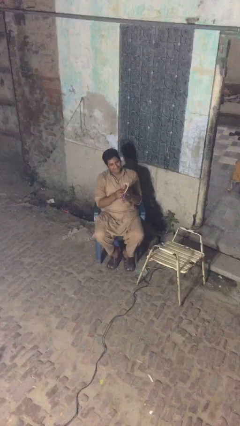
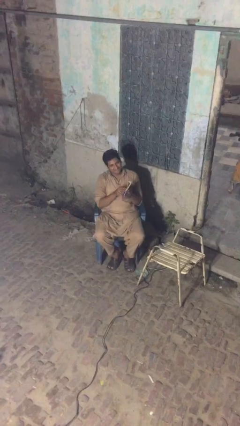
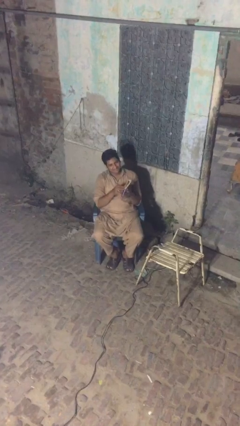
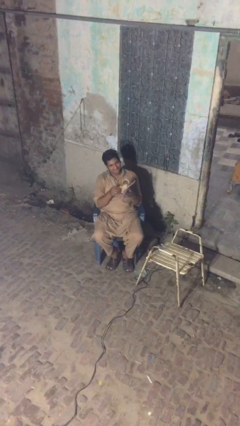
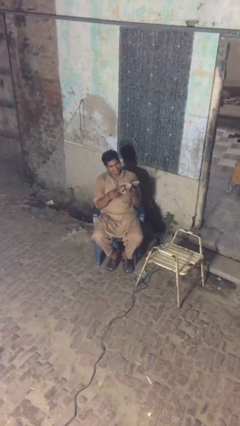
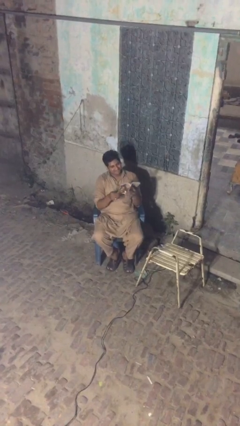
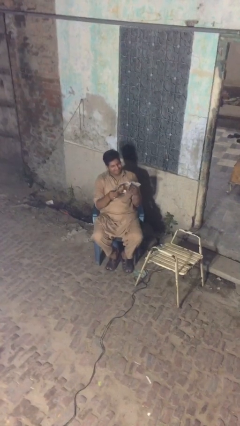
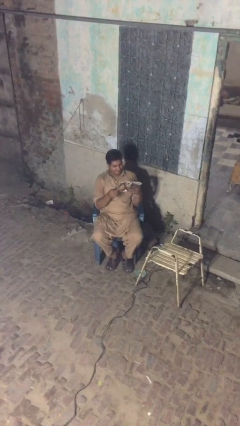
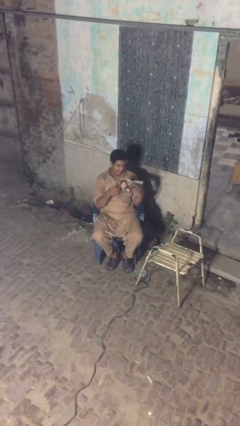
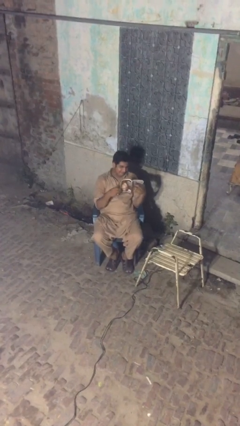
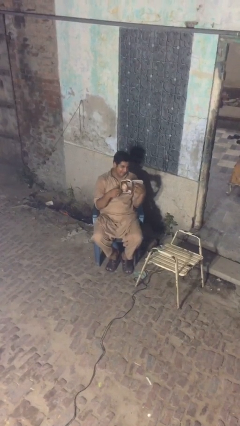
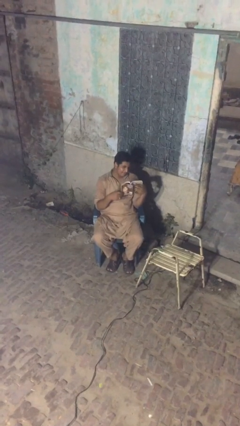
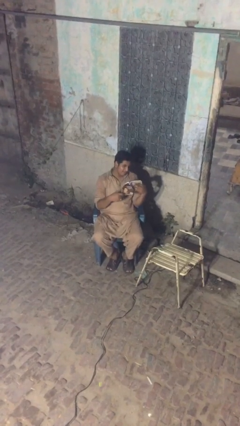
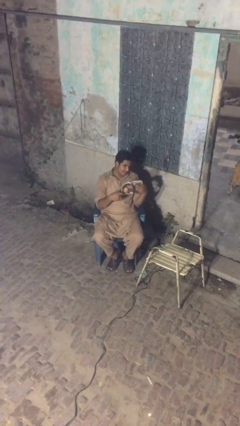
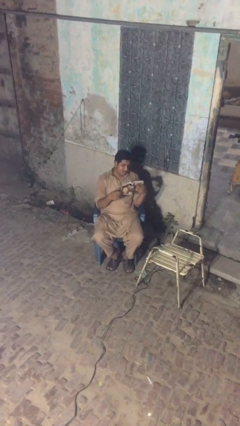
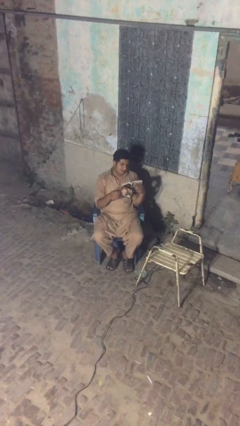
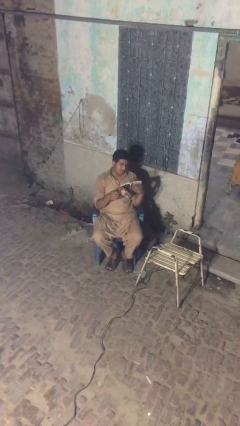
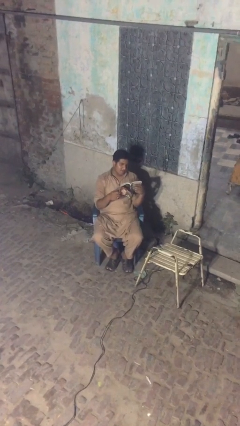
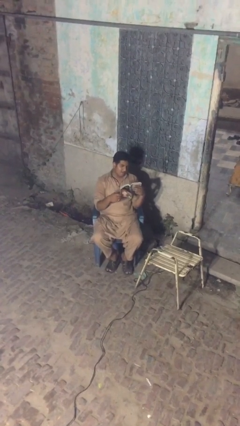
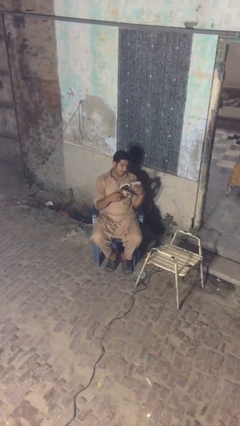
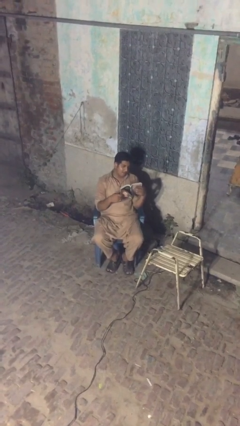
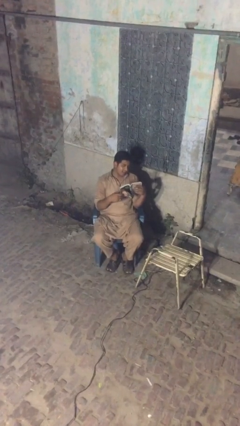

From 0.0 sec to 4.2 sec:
person reads document

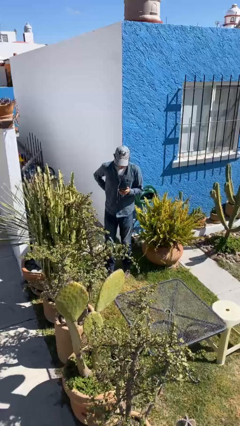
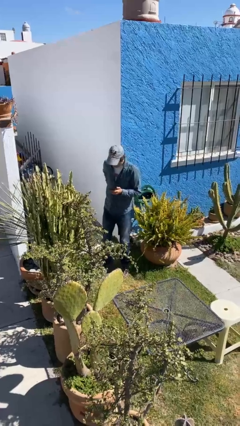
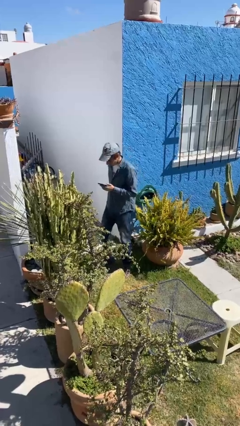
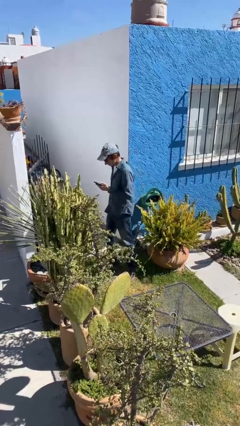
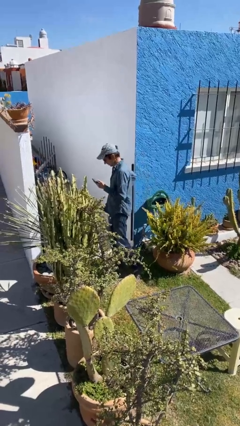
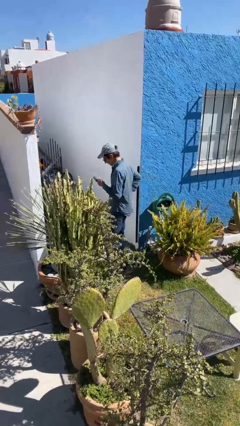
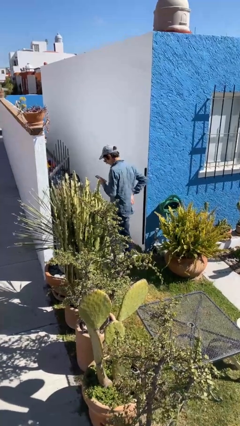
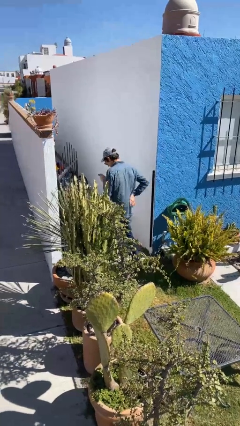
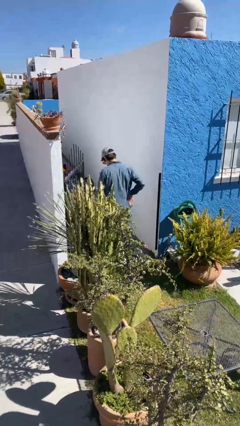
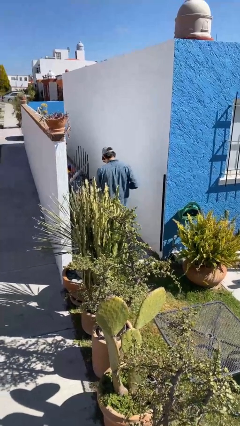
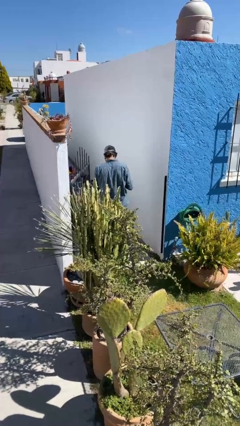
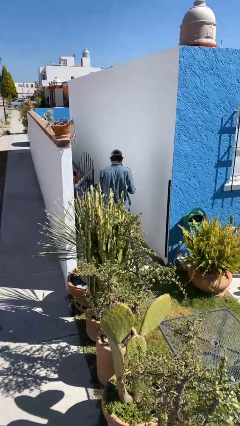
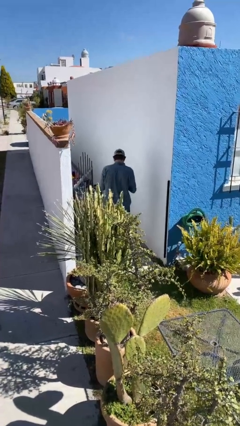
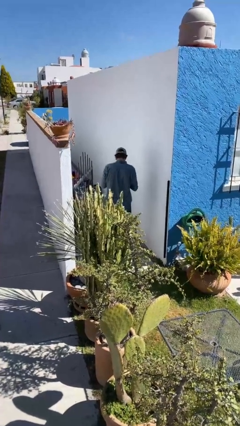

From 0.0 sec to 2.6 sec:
person exits scene through structure

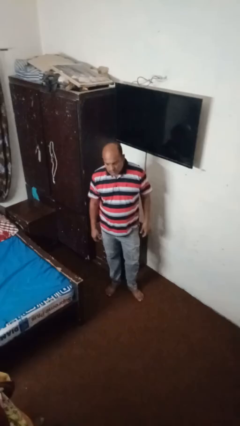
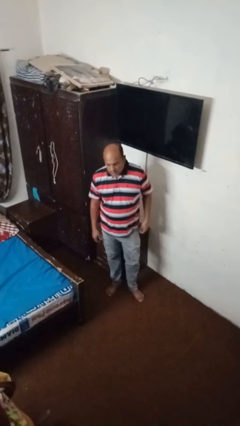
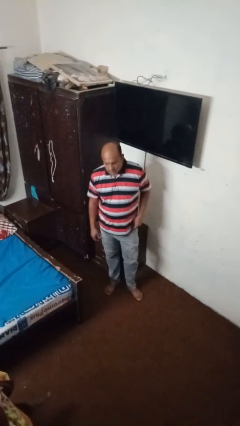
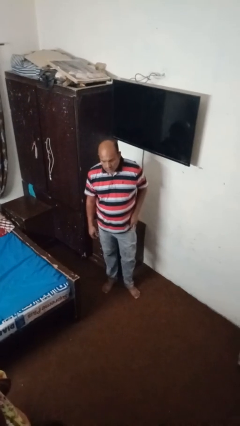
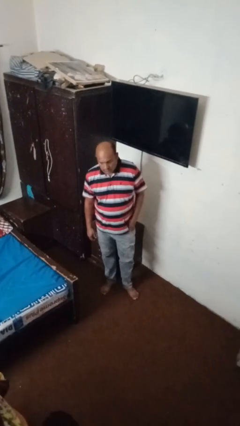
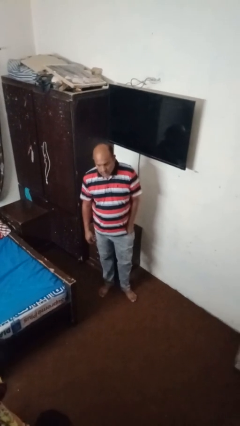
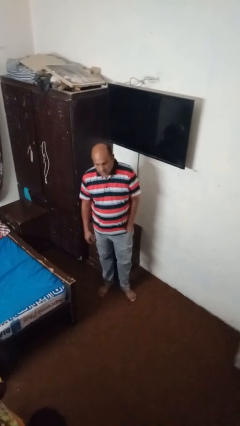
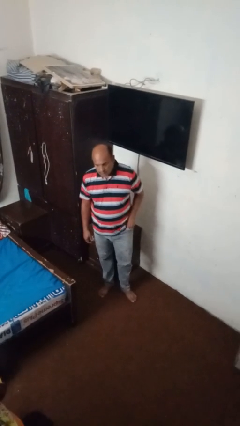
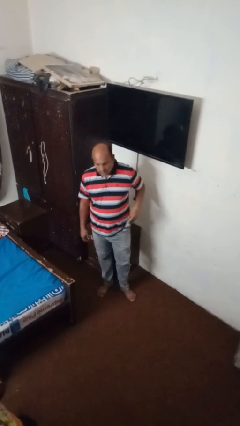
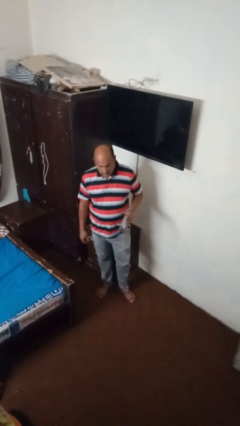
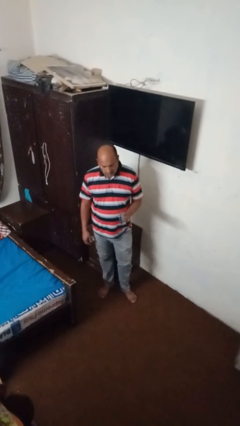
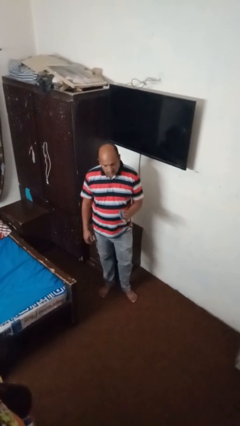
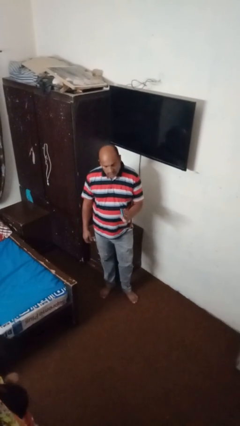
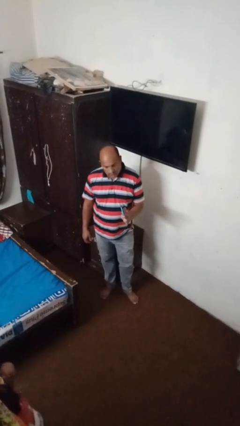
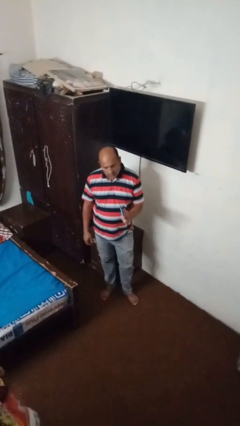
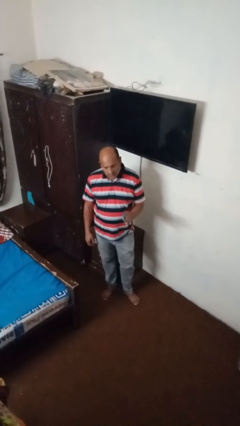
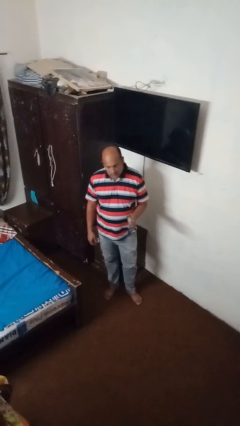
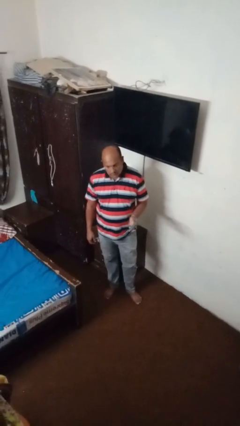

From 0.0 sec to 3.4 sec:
person takes phone from pocket

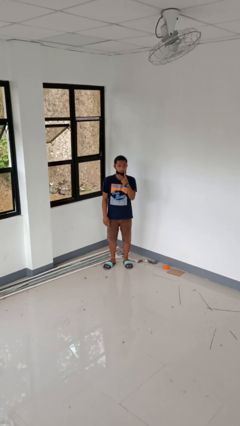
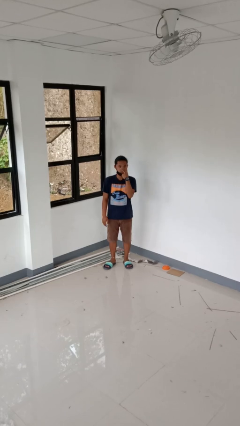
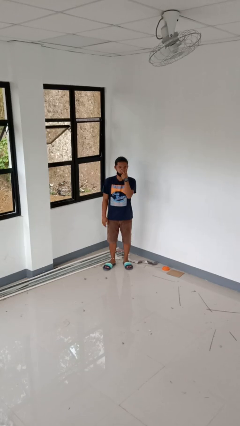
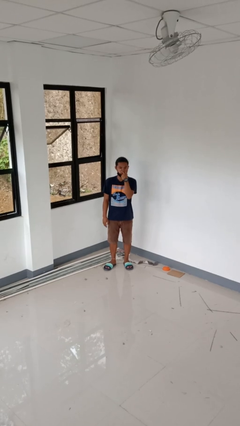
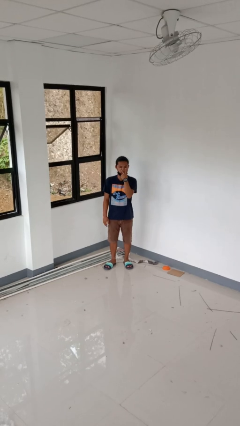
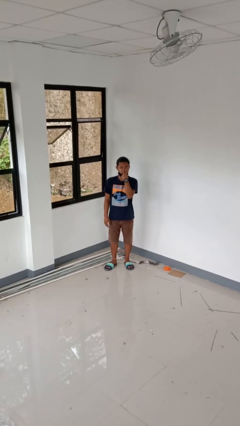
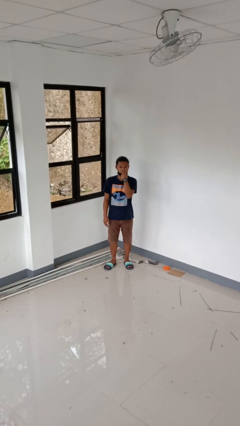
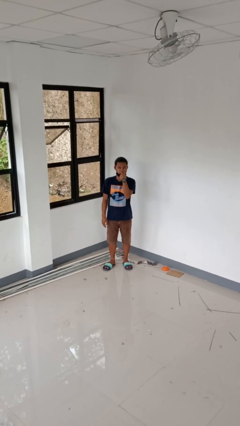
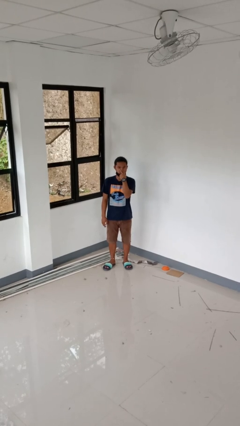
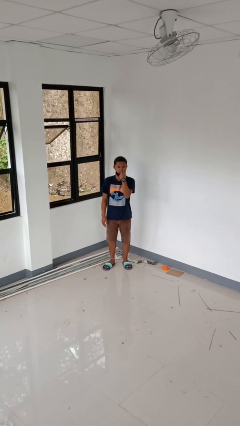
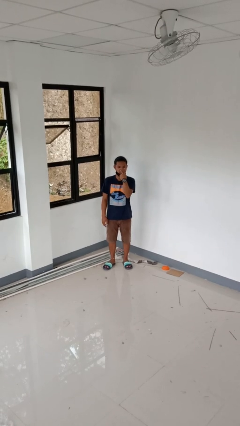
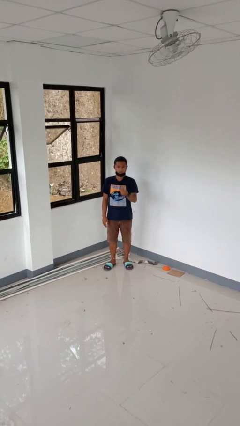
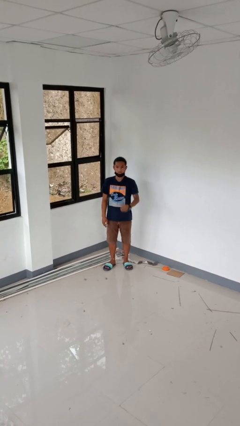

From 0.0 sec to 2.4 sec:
person gestures watch closely

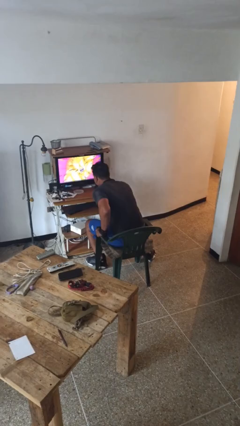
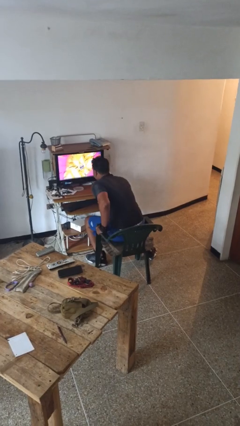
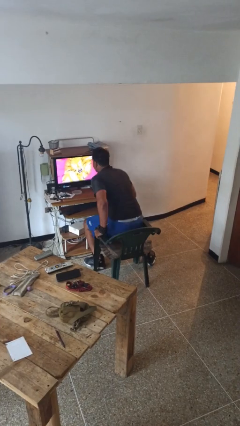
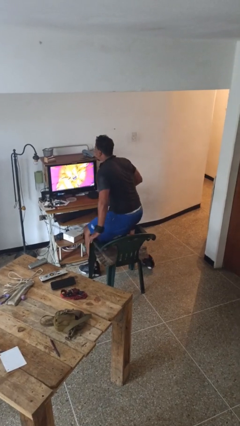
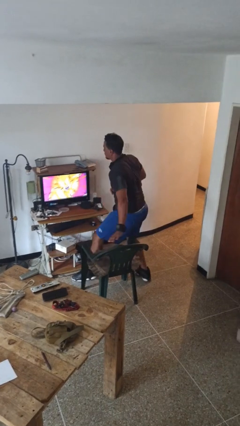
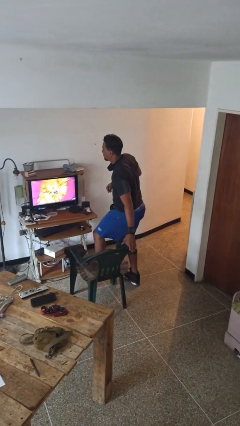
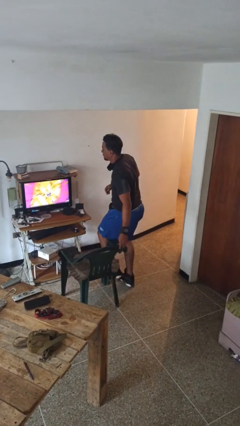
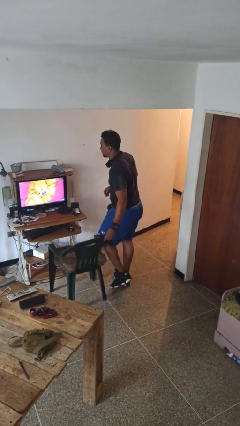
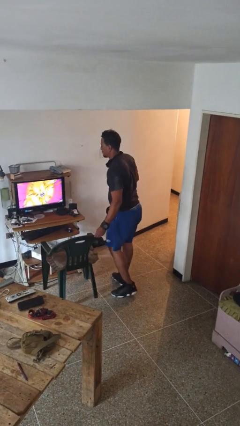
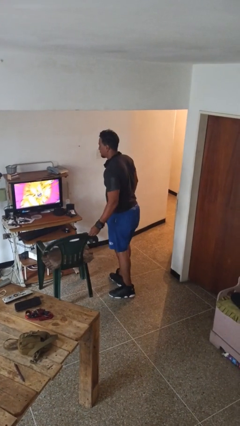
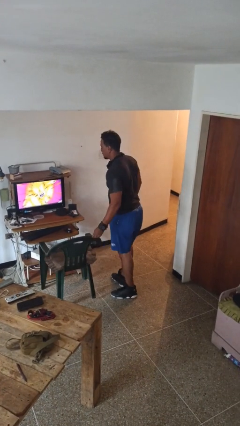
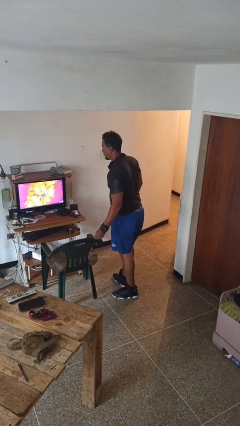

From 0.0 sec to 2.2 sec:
person stands up

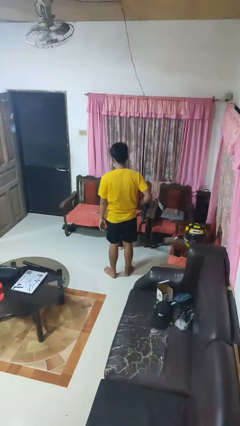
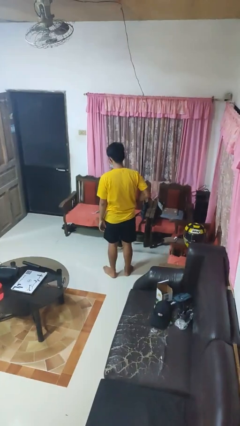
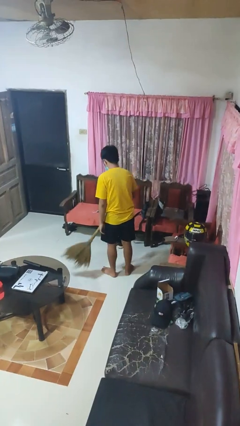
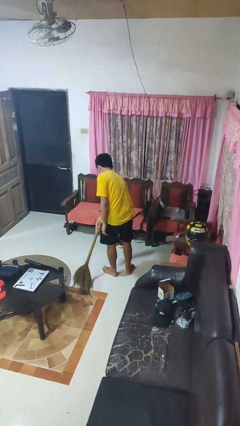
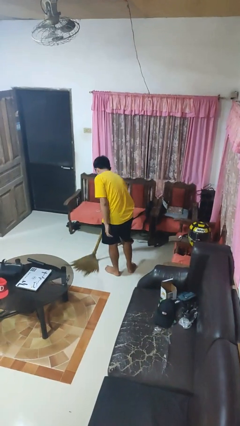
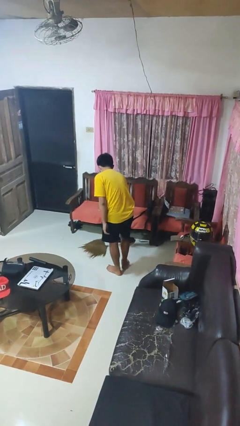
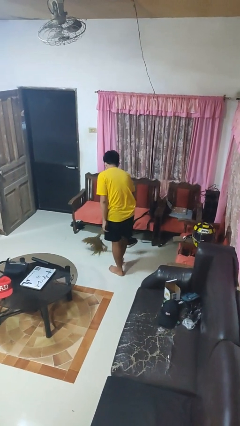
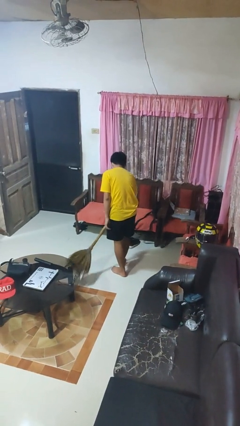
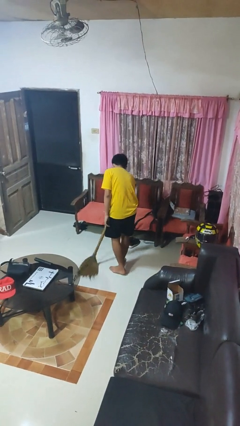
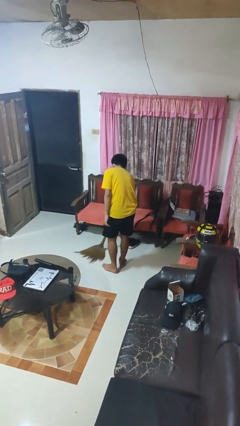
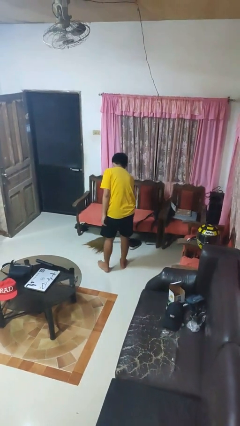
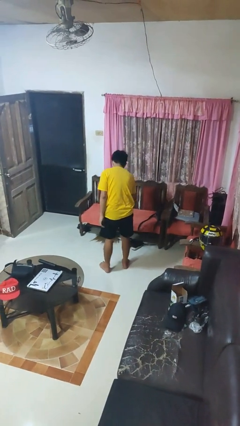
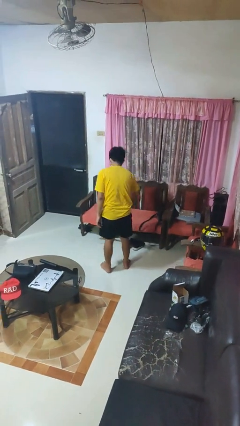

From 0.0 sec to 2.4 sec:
person sweeps floor
